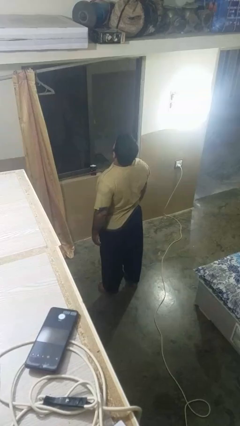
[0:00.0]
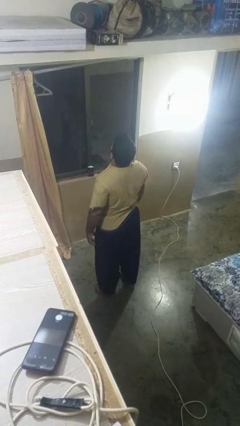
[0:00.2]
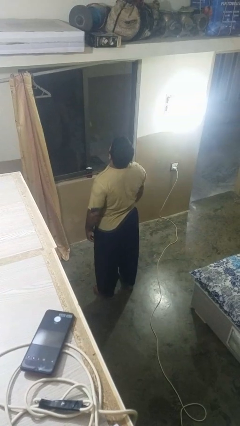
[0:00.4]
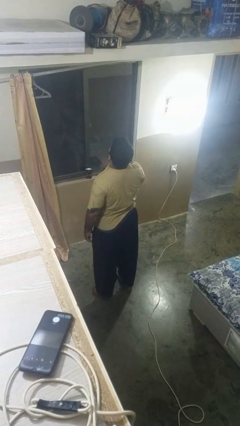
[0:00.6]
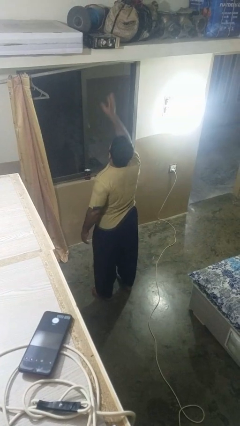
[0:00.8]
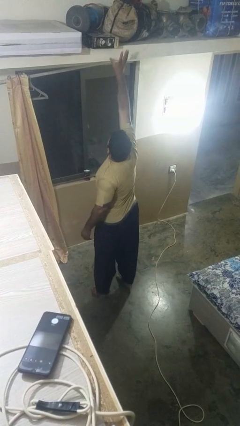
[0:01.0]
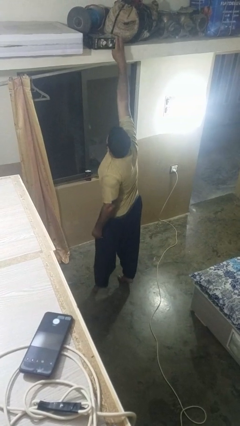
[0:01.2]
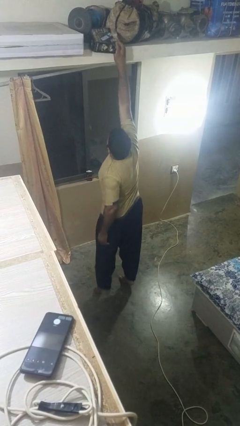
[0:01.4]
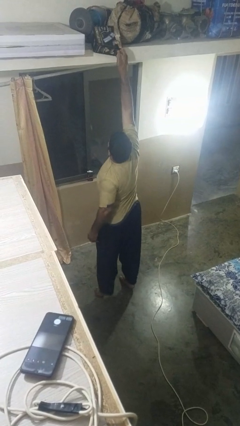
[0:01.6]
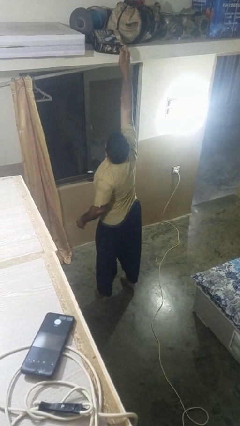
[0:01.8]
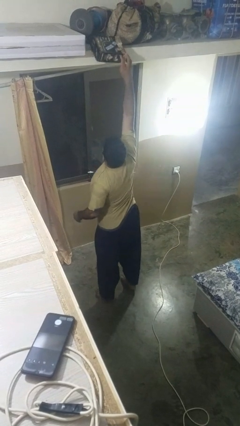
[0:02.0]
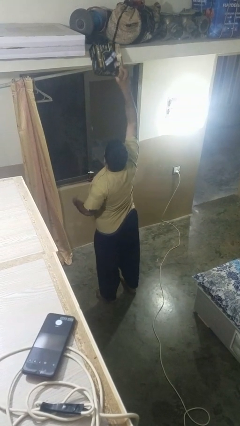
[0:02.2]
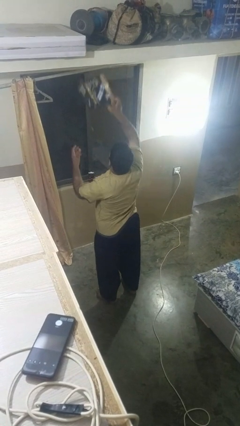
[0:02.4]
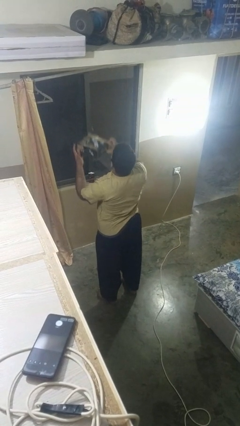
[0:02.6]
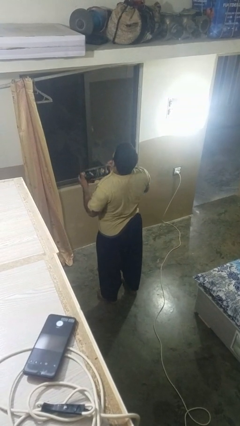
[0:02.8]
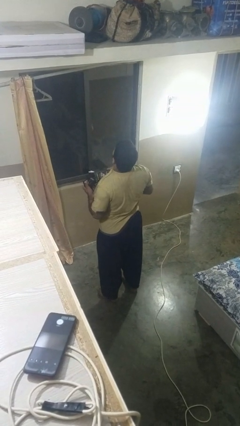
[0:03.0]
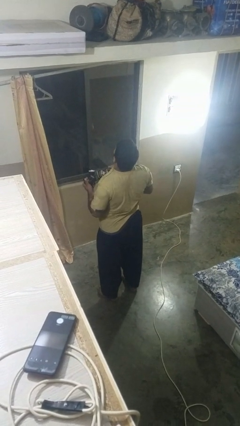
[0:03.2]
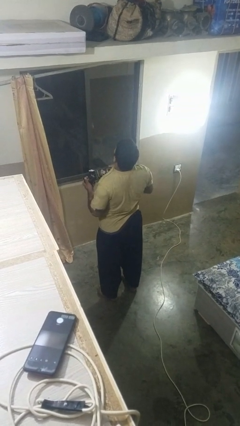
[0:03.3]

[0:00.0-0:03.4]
person picks up object from shelf

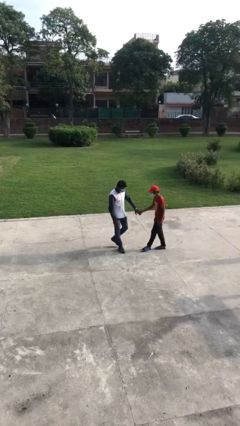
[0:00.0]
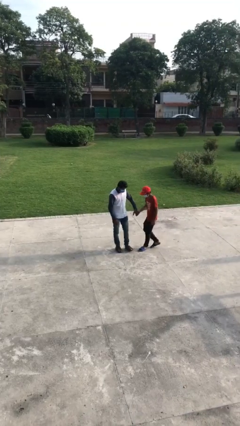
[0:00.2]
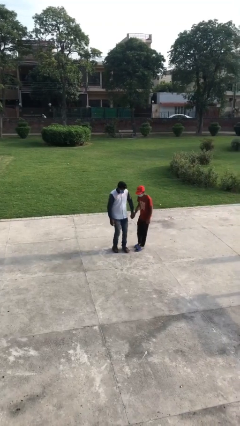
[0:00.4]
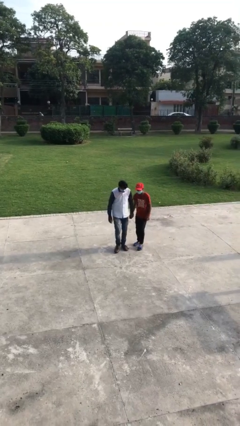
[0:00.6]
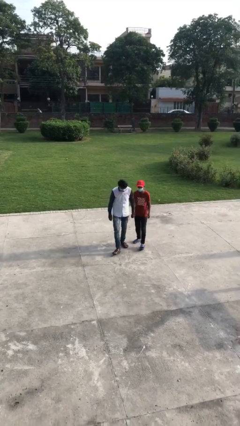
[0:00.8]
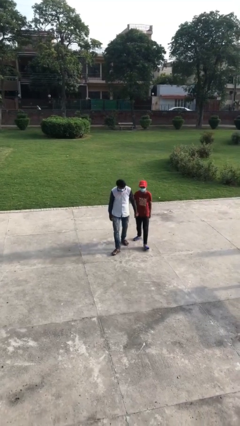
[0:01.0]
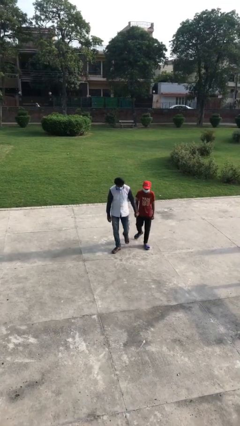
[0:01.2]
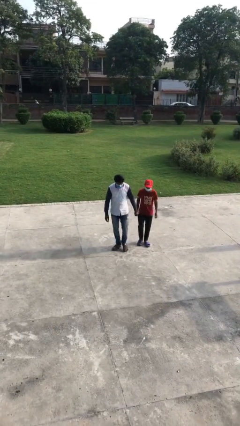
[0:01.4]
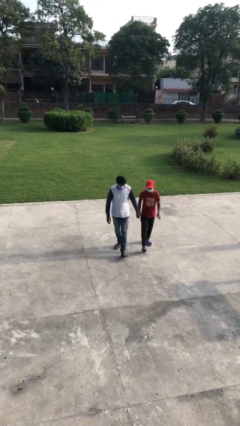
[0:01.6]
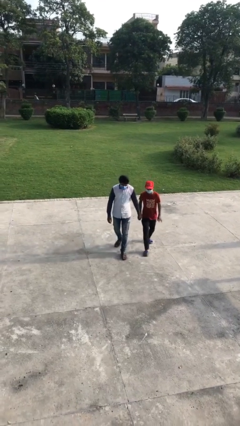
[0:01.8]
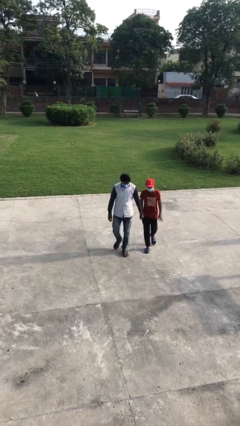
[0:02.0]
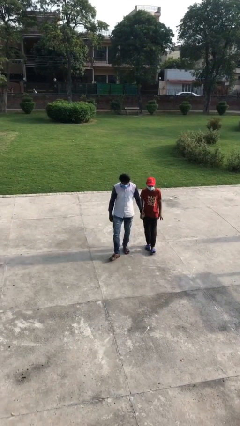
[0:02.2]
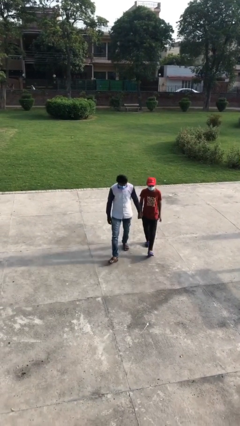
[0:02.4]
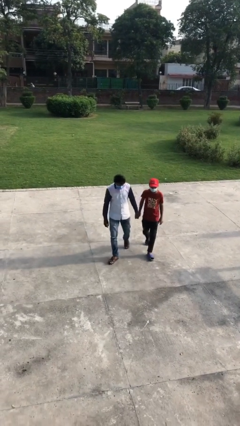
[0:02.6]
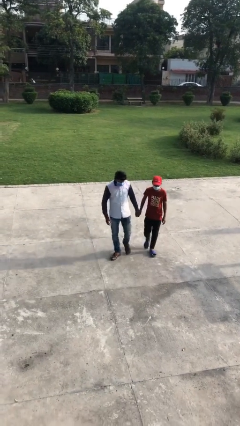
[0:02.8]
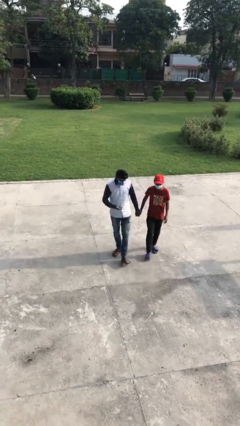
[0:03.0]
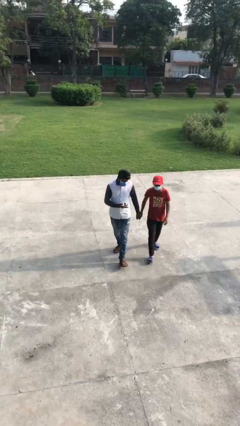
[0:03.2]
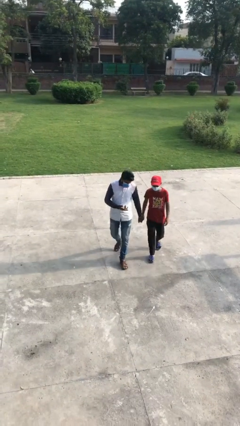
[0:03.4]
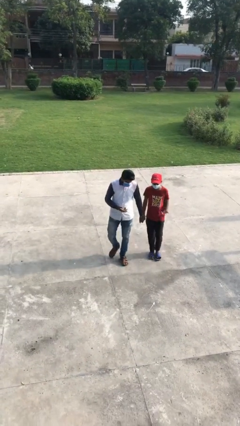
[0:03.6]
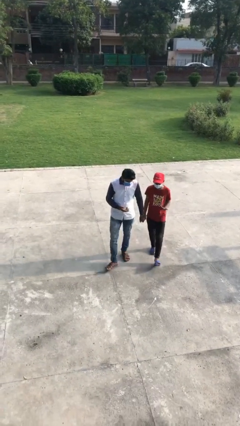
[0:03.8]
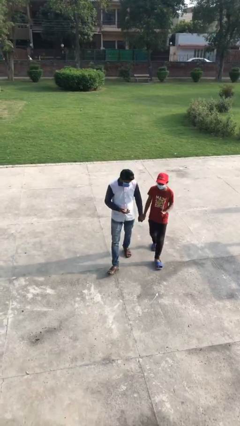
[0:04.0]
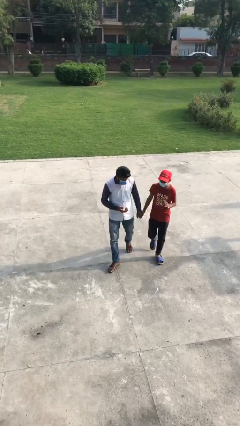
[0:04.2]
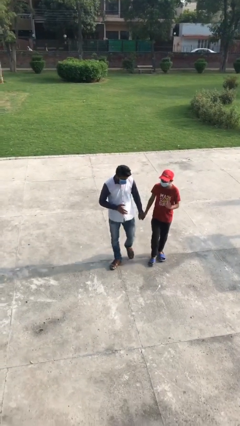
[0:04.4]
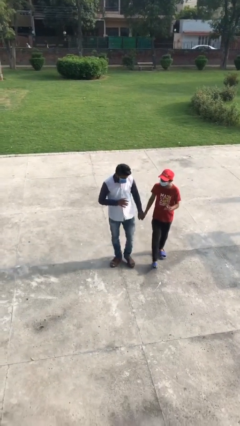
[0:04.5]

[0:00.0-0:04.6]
person holds hand

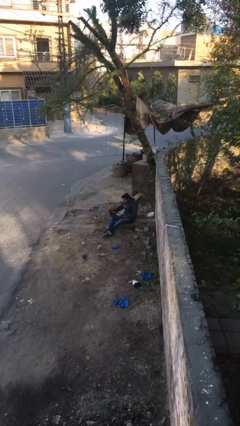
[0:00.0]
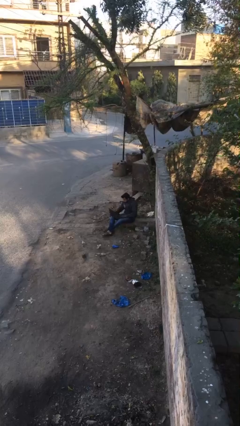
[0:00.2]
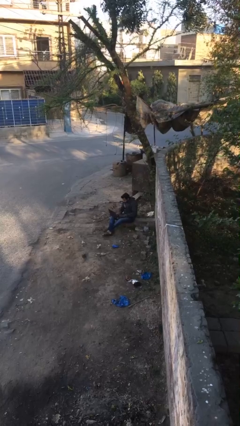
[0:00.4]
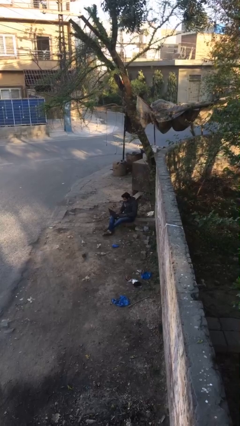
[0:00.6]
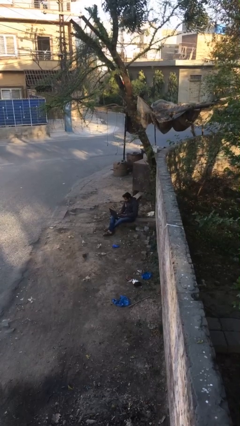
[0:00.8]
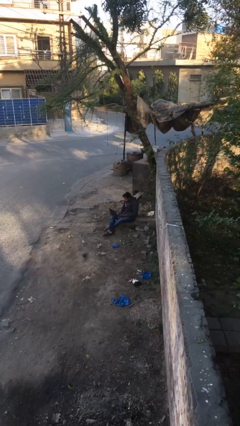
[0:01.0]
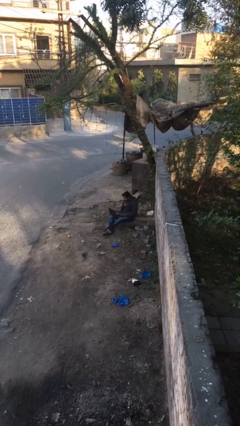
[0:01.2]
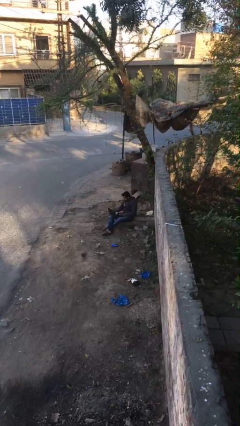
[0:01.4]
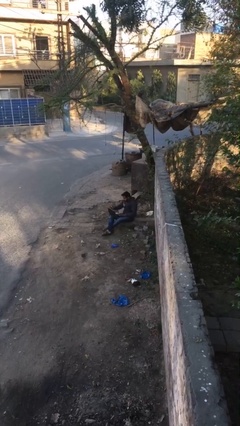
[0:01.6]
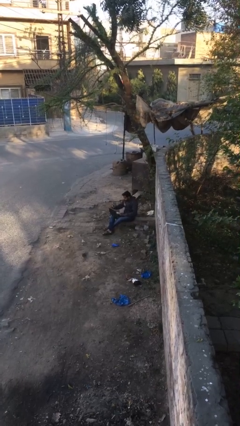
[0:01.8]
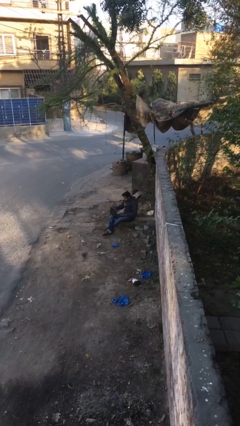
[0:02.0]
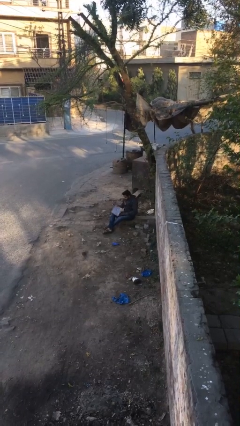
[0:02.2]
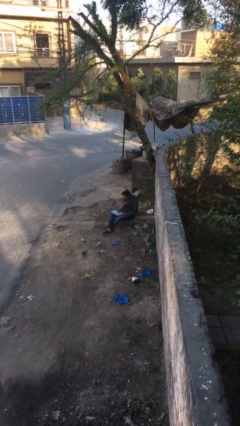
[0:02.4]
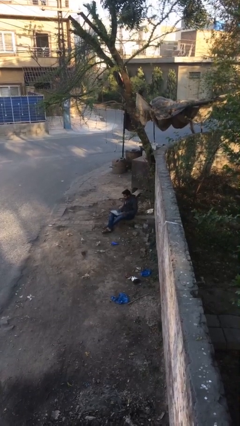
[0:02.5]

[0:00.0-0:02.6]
person interacts with laptop

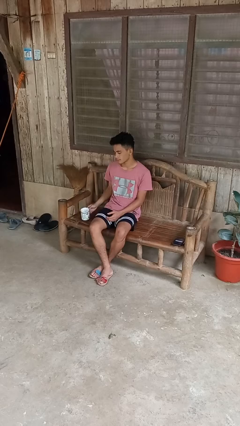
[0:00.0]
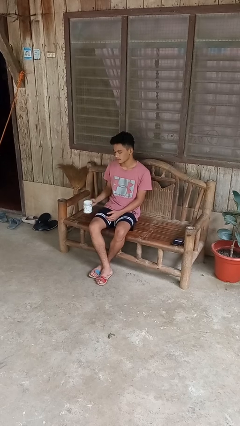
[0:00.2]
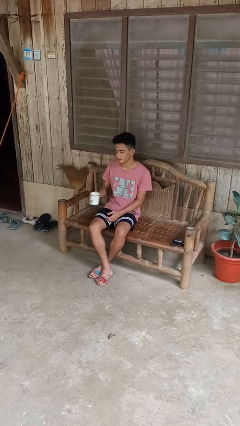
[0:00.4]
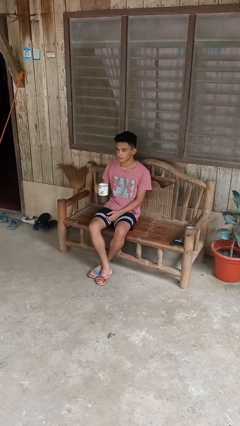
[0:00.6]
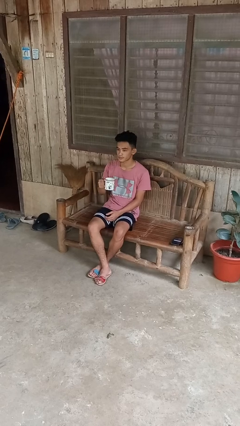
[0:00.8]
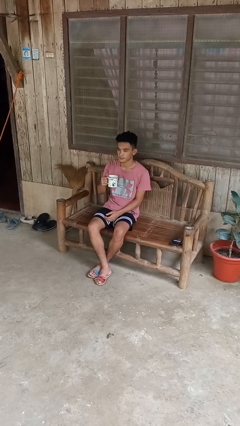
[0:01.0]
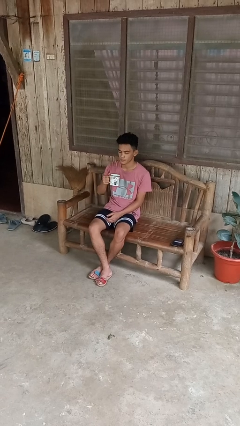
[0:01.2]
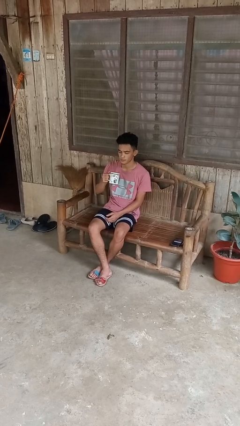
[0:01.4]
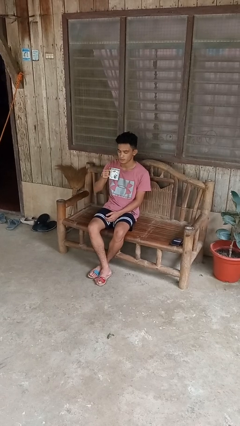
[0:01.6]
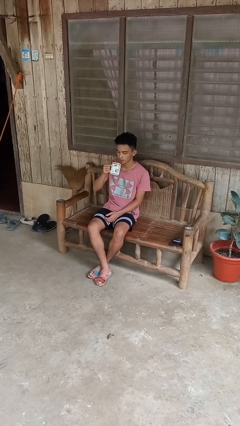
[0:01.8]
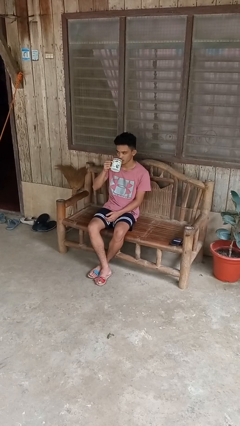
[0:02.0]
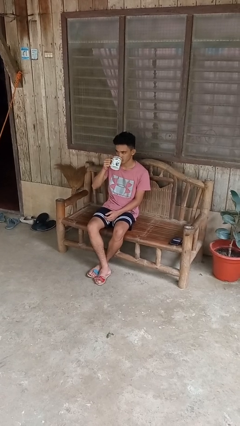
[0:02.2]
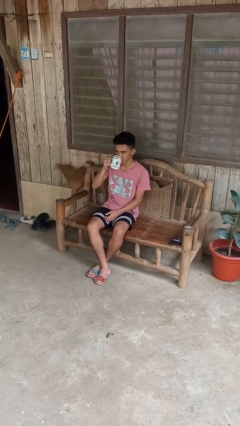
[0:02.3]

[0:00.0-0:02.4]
person picks up object from table

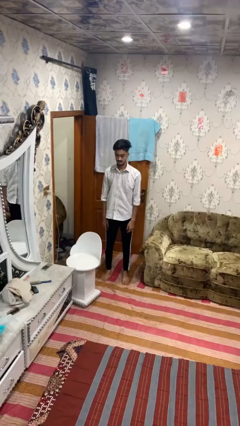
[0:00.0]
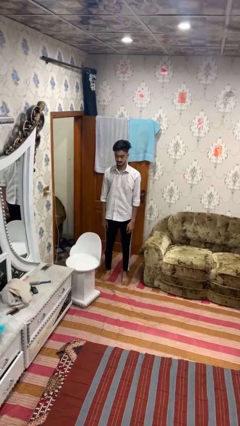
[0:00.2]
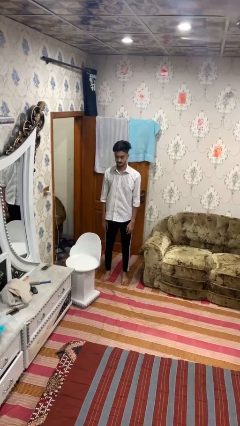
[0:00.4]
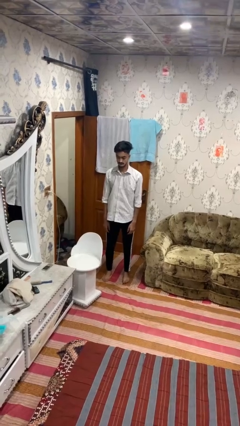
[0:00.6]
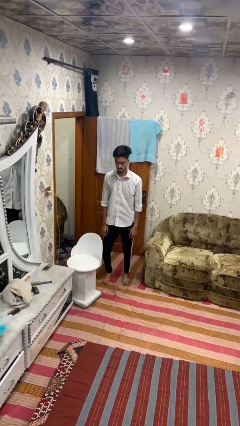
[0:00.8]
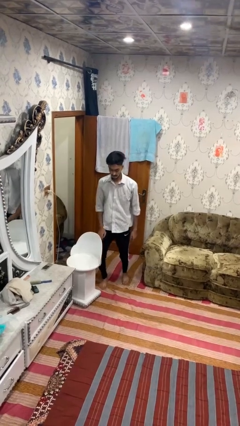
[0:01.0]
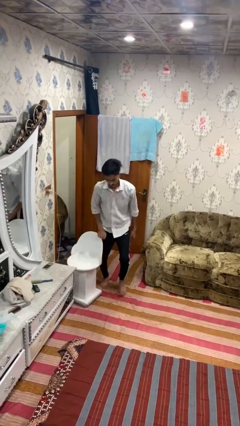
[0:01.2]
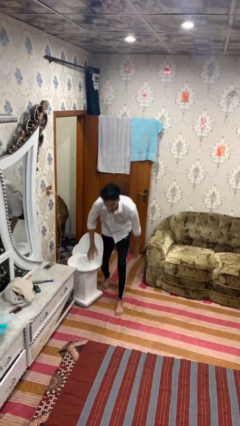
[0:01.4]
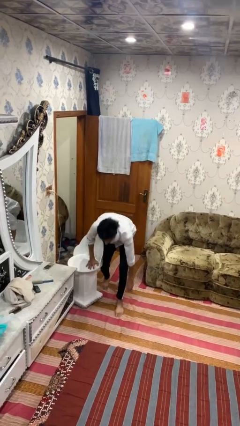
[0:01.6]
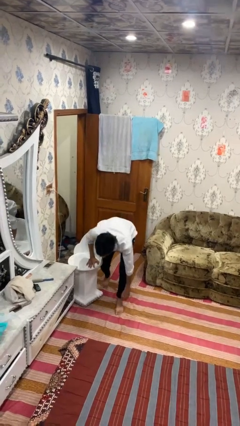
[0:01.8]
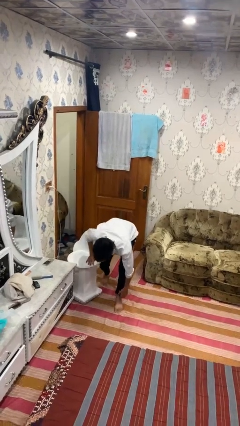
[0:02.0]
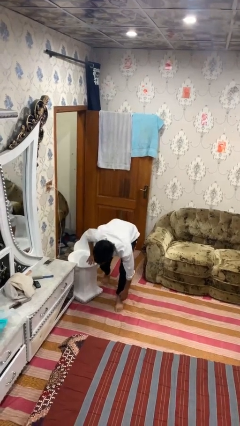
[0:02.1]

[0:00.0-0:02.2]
person trips on object on floor

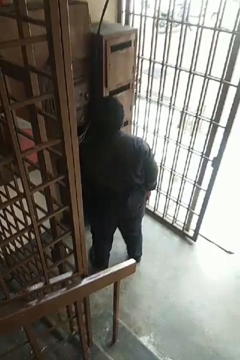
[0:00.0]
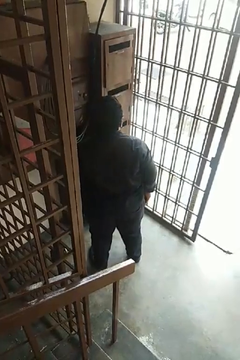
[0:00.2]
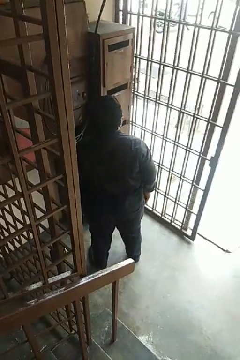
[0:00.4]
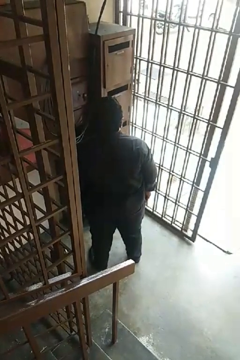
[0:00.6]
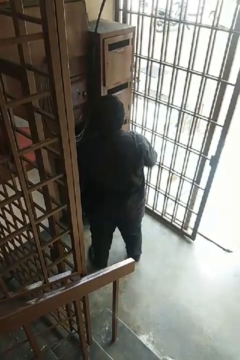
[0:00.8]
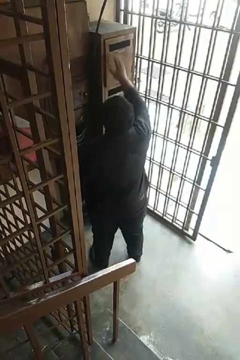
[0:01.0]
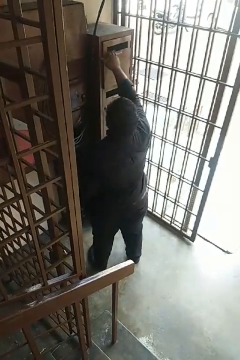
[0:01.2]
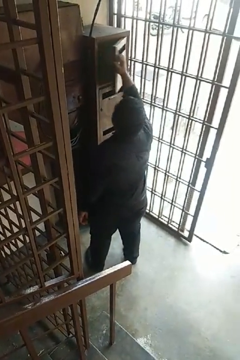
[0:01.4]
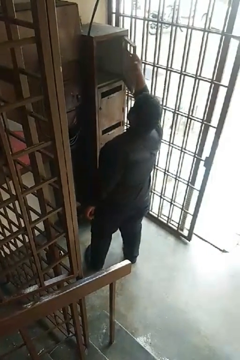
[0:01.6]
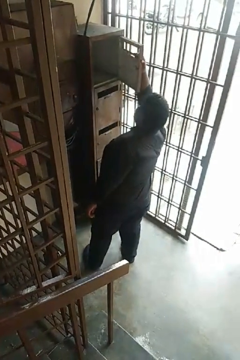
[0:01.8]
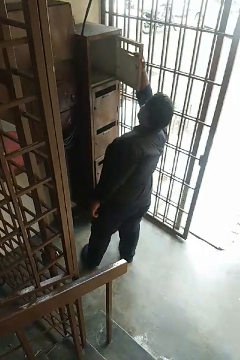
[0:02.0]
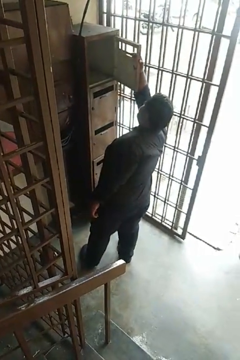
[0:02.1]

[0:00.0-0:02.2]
person opens mailbox

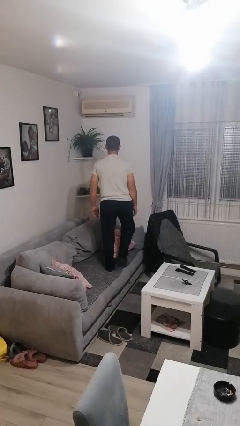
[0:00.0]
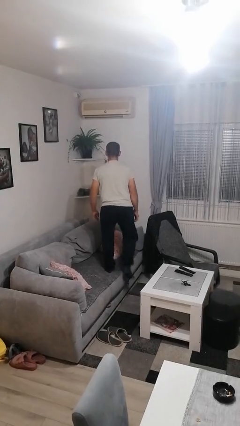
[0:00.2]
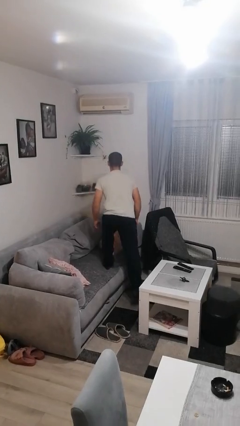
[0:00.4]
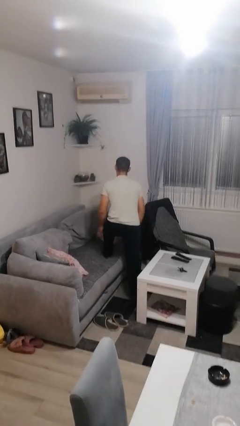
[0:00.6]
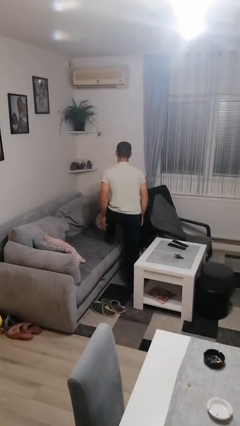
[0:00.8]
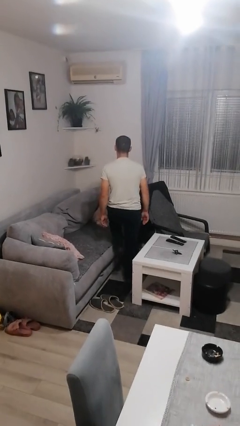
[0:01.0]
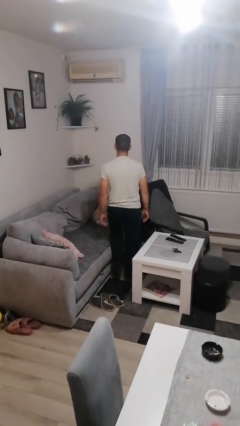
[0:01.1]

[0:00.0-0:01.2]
person climbs off couch
